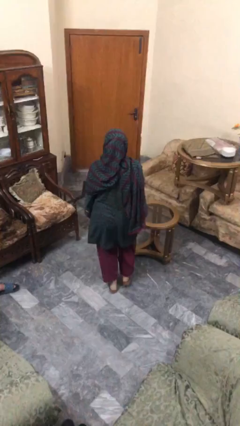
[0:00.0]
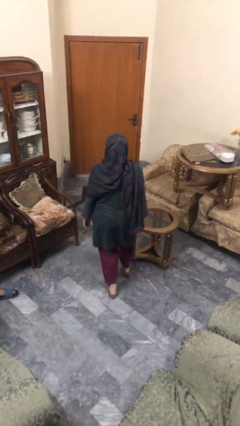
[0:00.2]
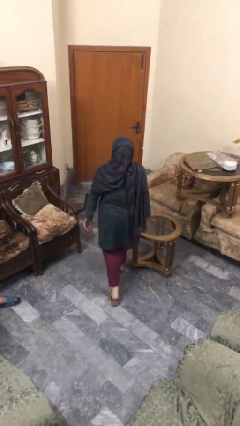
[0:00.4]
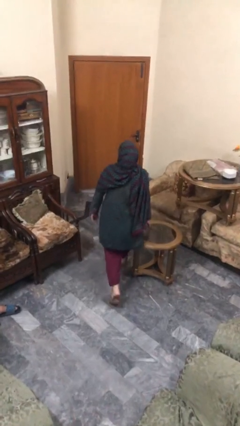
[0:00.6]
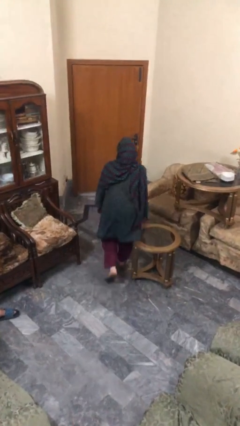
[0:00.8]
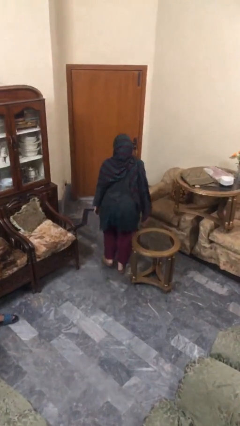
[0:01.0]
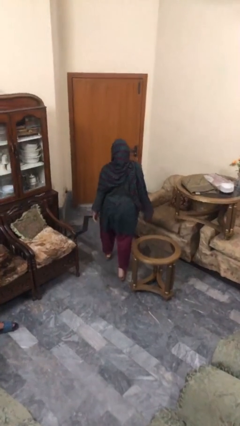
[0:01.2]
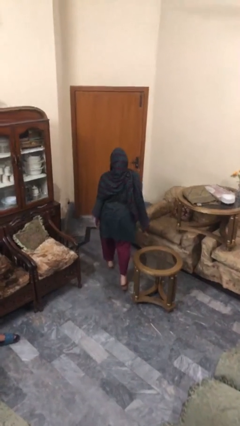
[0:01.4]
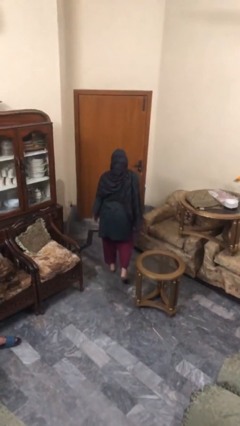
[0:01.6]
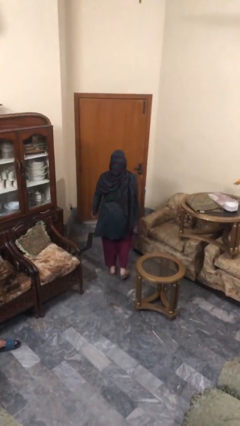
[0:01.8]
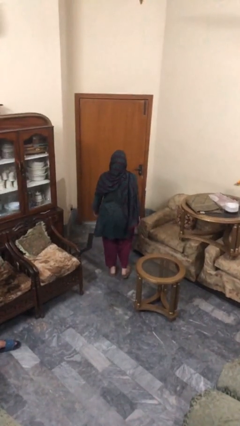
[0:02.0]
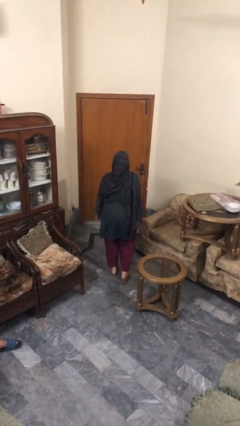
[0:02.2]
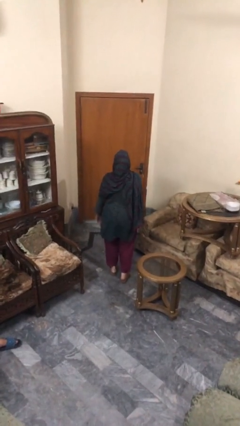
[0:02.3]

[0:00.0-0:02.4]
person bumps into table

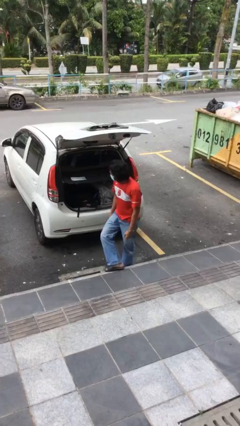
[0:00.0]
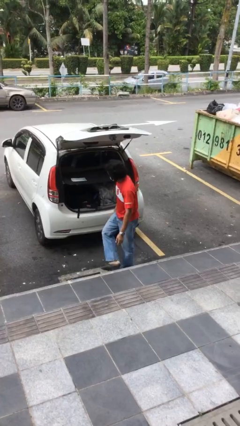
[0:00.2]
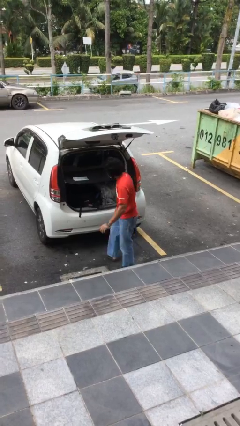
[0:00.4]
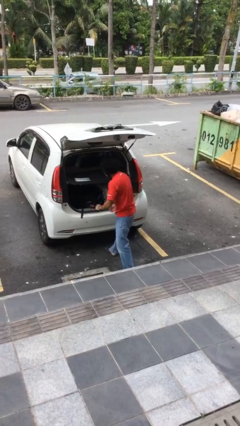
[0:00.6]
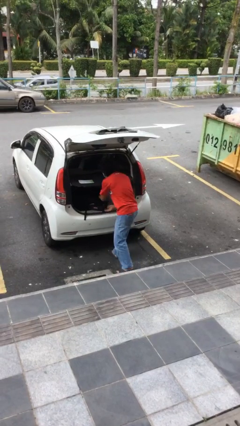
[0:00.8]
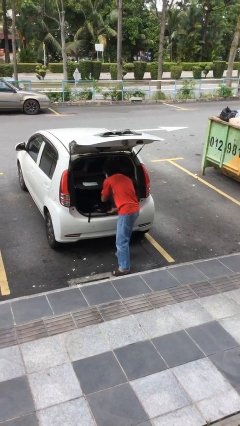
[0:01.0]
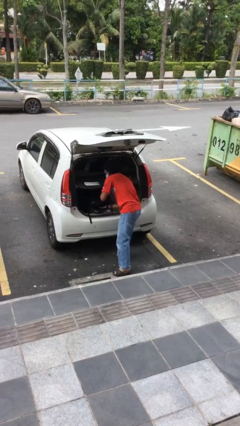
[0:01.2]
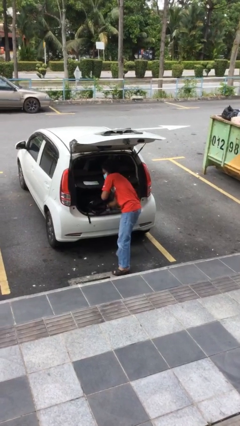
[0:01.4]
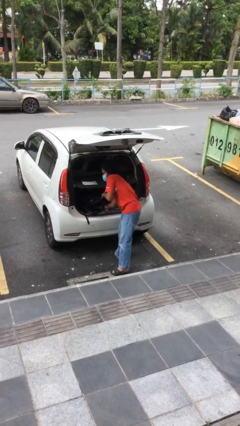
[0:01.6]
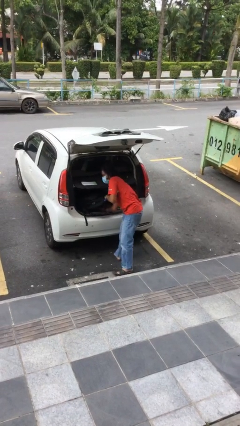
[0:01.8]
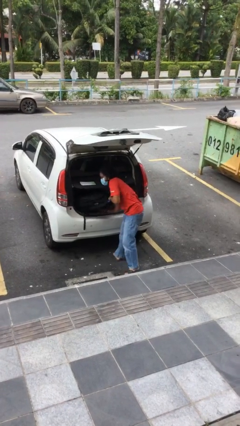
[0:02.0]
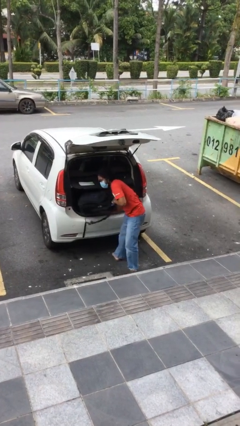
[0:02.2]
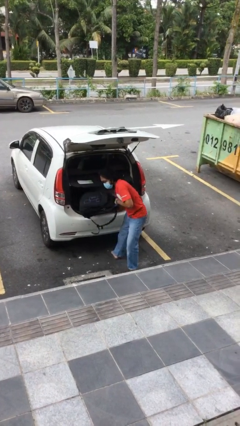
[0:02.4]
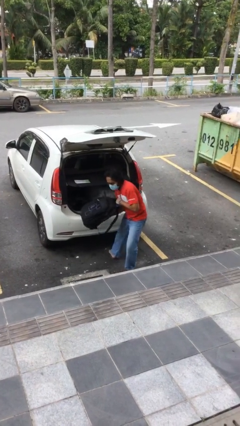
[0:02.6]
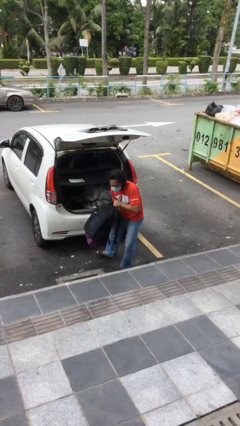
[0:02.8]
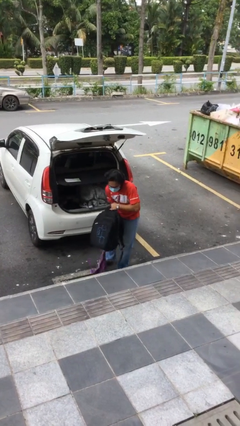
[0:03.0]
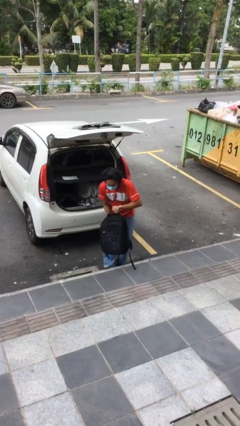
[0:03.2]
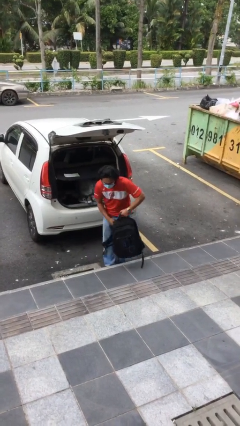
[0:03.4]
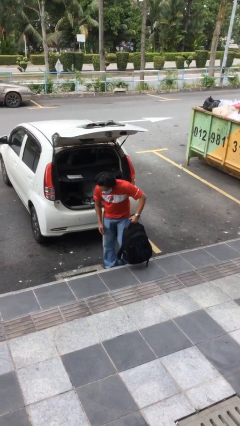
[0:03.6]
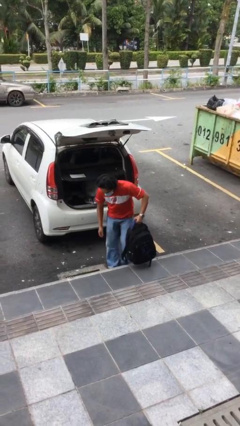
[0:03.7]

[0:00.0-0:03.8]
person unloads car

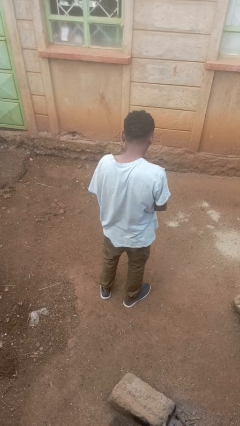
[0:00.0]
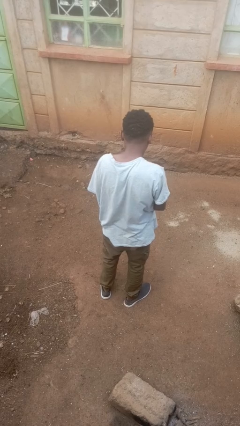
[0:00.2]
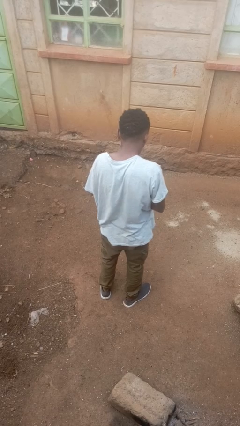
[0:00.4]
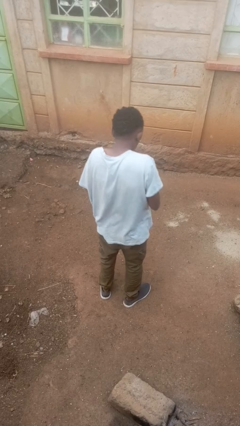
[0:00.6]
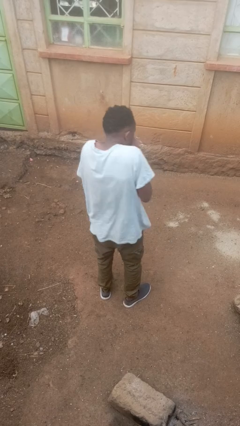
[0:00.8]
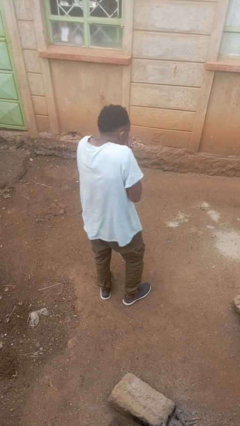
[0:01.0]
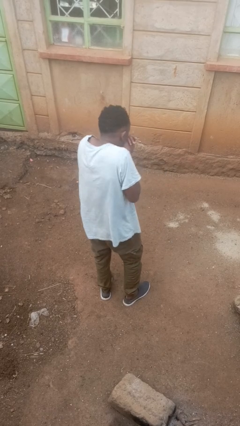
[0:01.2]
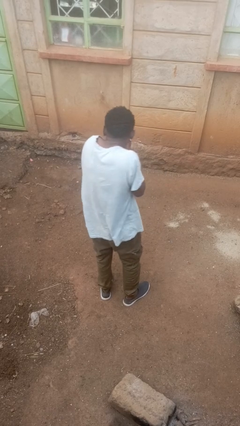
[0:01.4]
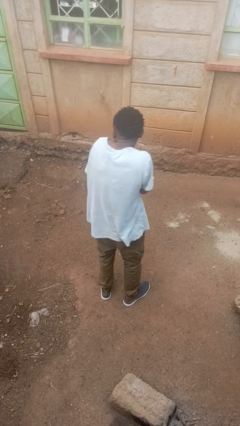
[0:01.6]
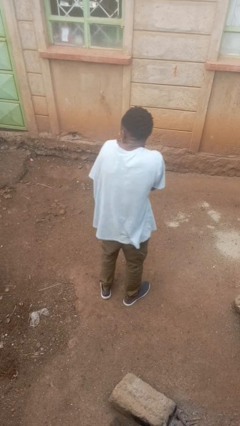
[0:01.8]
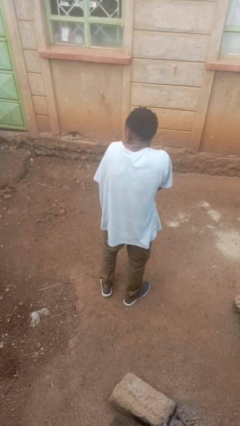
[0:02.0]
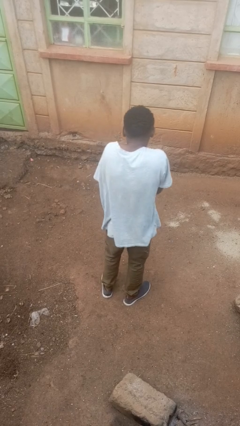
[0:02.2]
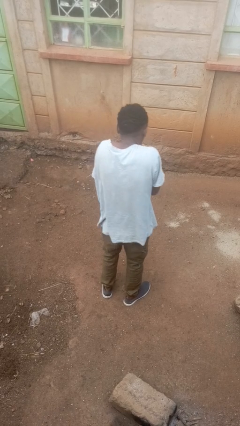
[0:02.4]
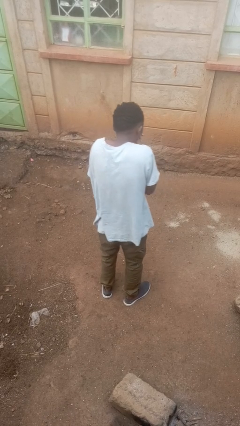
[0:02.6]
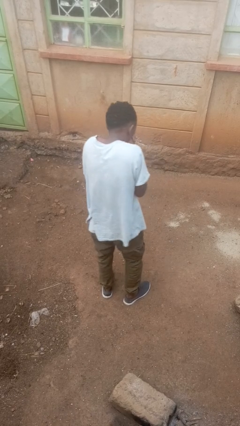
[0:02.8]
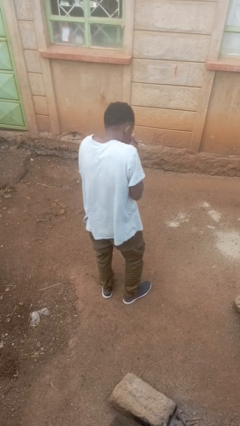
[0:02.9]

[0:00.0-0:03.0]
person blows into hands

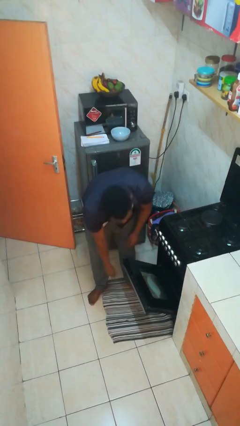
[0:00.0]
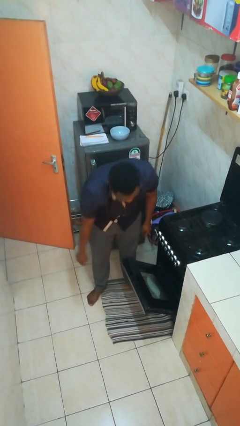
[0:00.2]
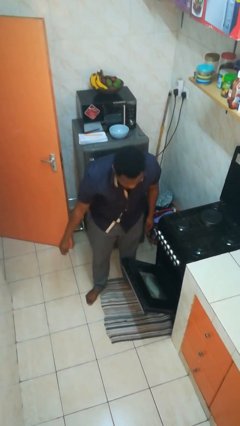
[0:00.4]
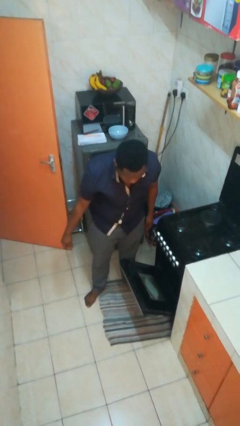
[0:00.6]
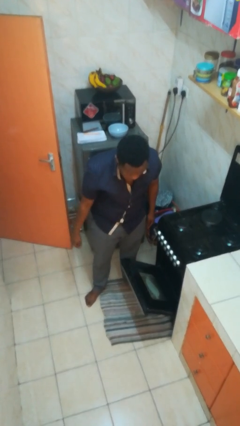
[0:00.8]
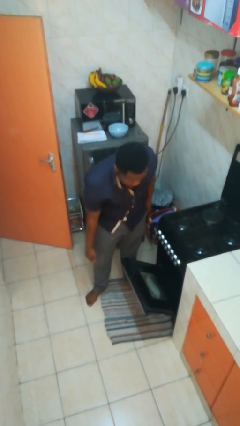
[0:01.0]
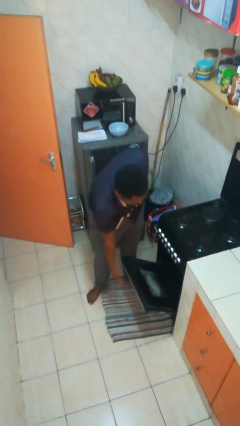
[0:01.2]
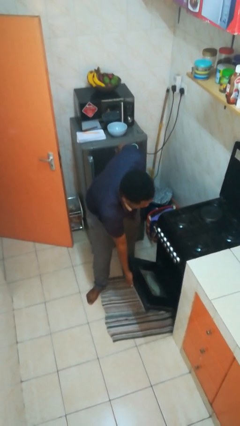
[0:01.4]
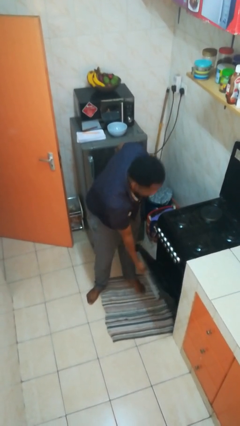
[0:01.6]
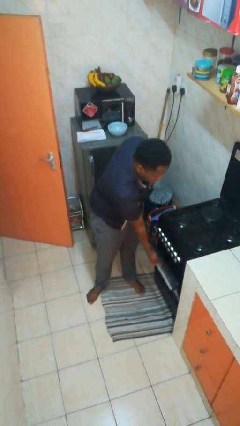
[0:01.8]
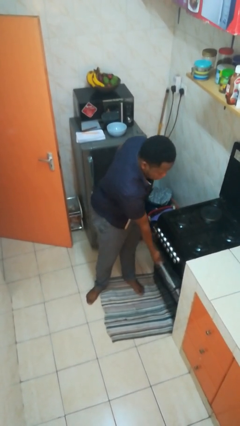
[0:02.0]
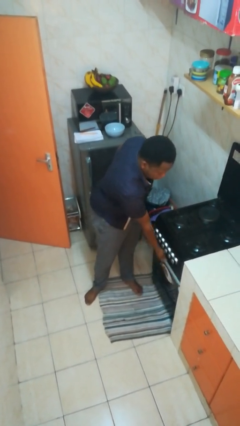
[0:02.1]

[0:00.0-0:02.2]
person closes oven door

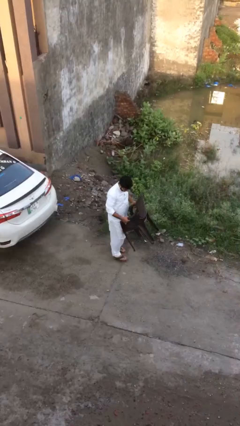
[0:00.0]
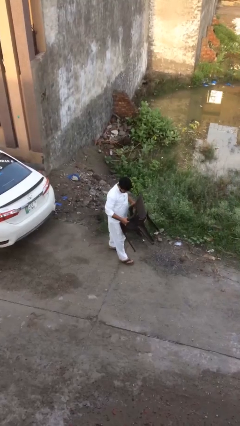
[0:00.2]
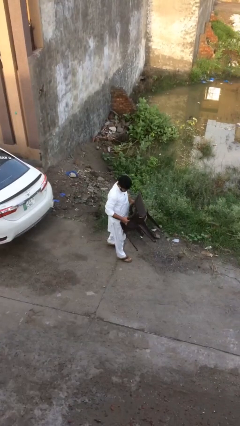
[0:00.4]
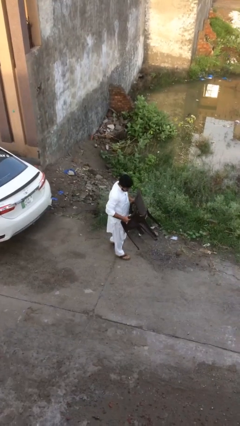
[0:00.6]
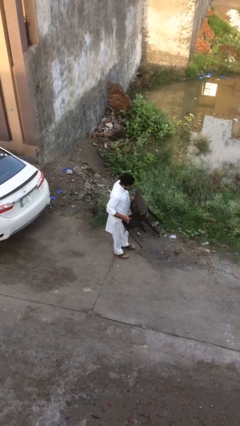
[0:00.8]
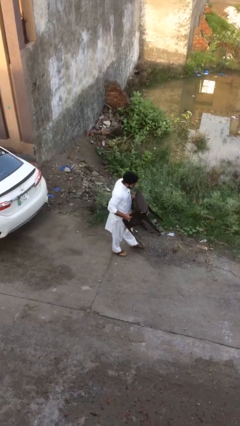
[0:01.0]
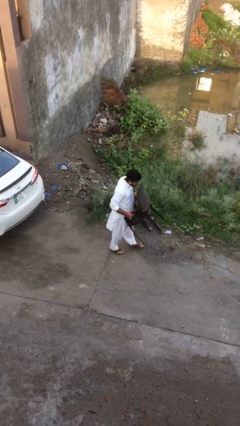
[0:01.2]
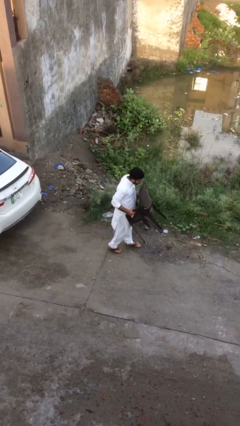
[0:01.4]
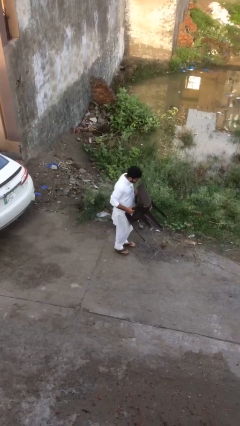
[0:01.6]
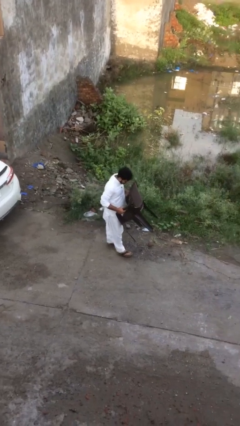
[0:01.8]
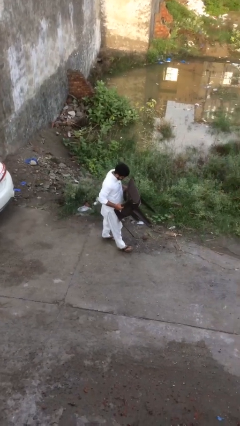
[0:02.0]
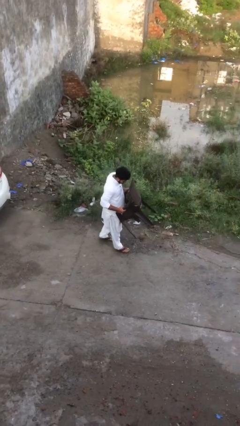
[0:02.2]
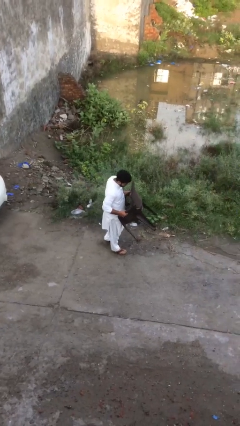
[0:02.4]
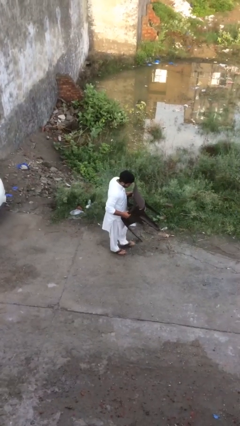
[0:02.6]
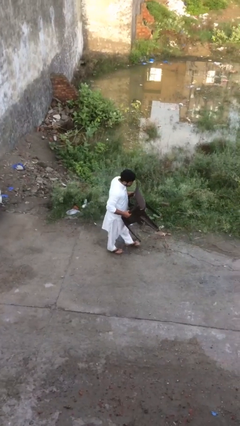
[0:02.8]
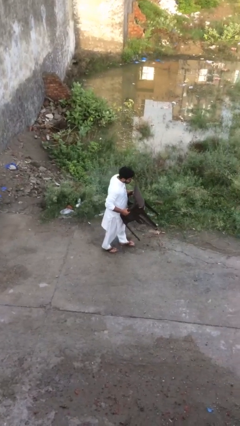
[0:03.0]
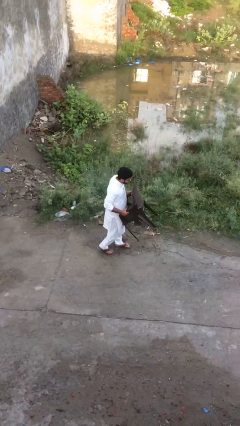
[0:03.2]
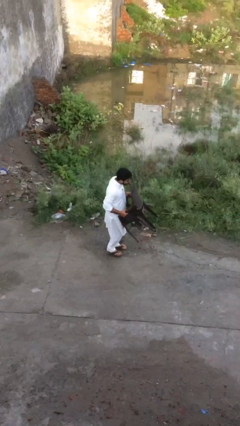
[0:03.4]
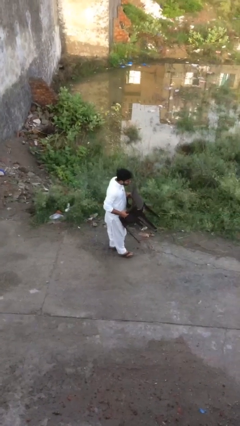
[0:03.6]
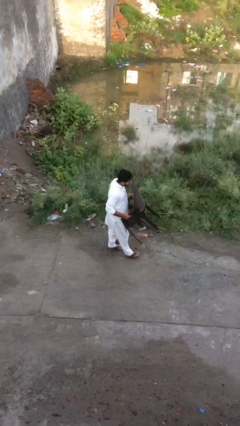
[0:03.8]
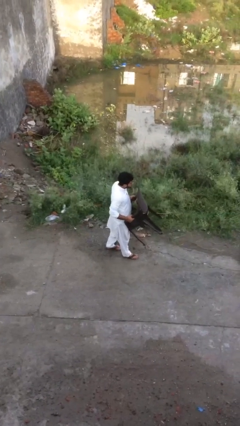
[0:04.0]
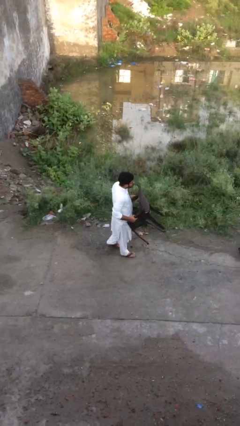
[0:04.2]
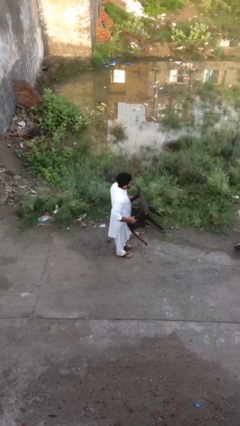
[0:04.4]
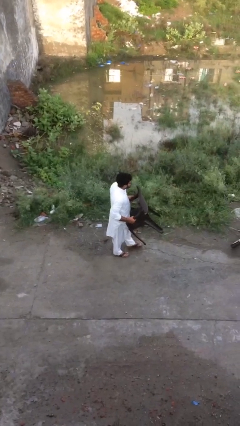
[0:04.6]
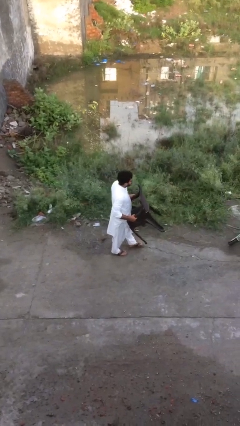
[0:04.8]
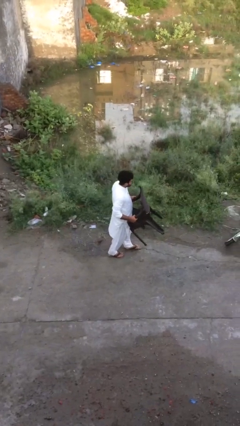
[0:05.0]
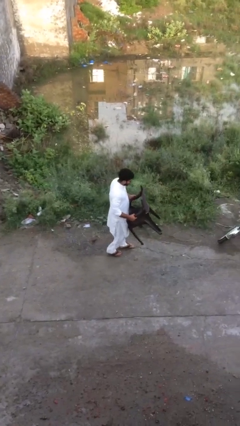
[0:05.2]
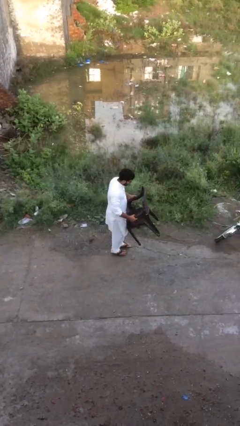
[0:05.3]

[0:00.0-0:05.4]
person carries heavy object

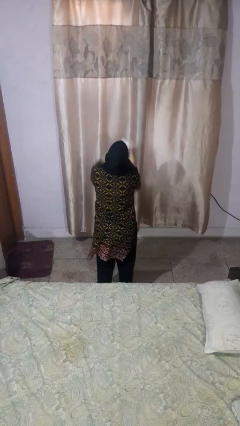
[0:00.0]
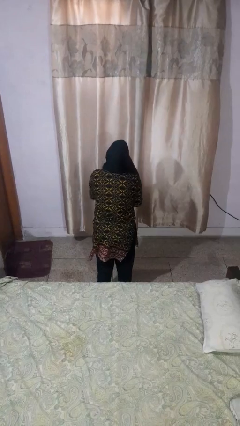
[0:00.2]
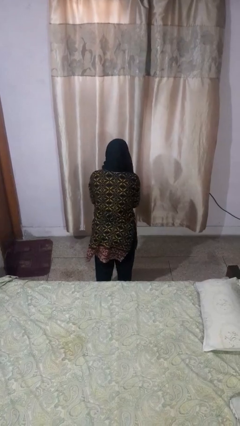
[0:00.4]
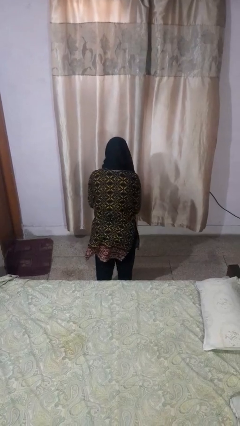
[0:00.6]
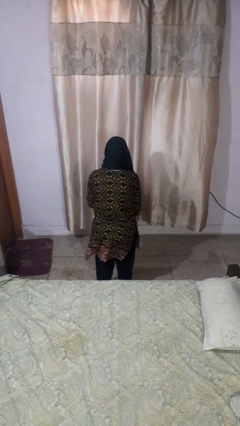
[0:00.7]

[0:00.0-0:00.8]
person catches dropped object

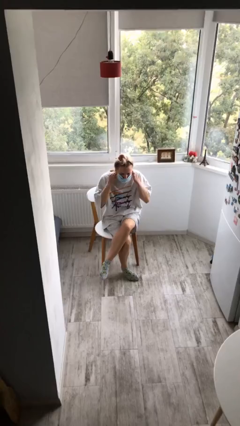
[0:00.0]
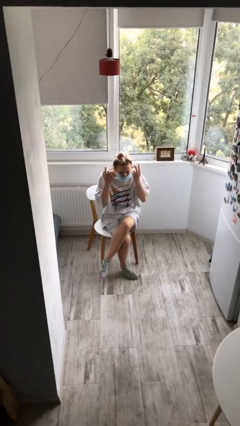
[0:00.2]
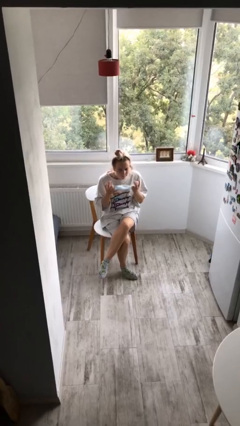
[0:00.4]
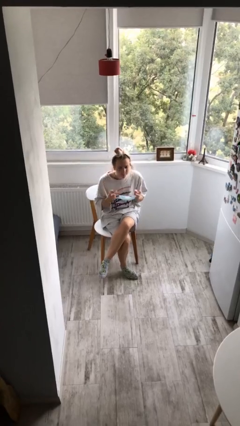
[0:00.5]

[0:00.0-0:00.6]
person takes off facemask
